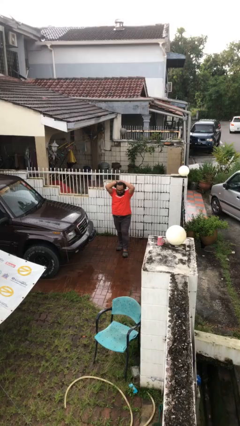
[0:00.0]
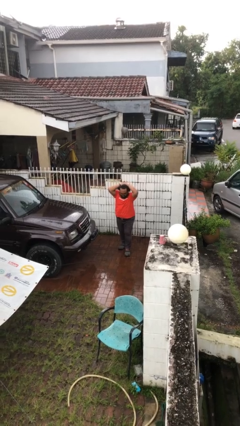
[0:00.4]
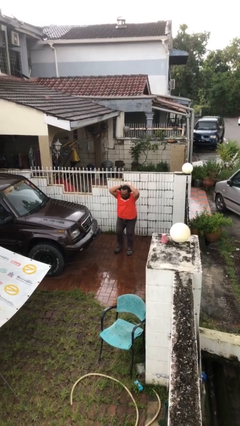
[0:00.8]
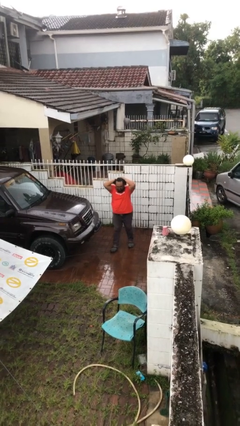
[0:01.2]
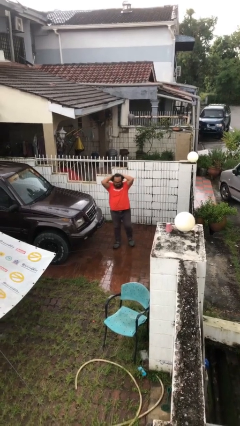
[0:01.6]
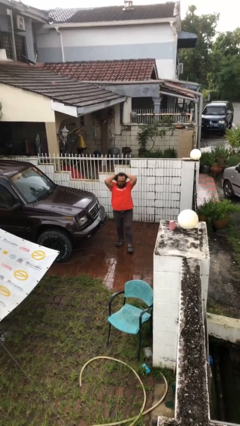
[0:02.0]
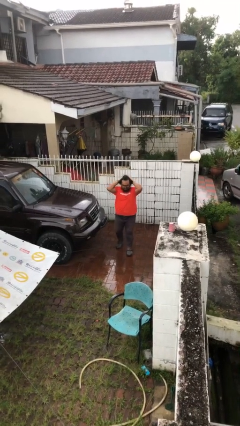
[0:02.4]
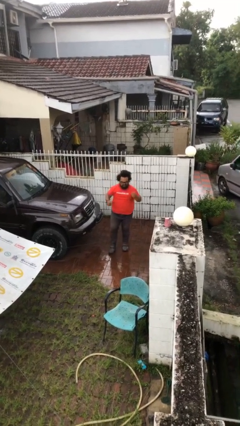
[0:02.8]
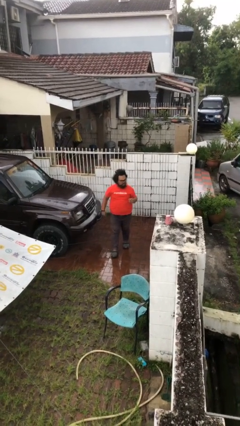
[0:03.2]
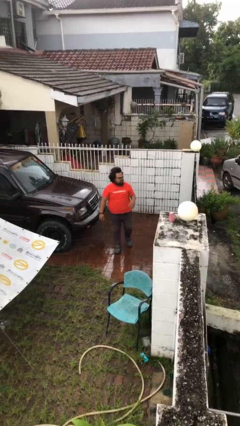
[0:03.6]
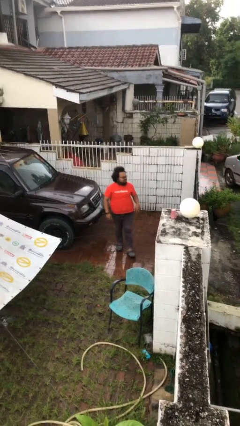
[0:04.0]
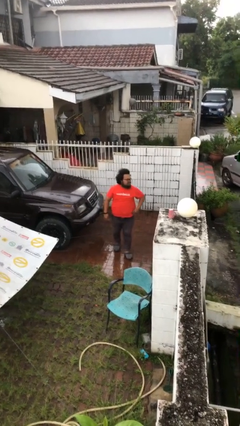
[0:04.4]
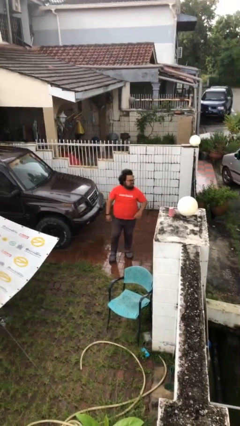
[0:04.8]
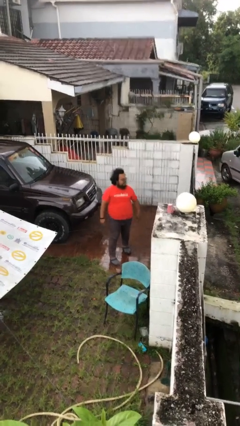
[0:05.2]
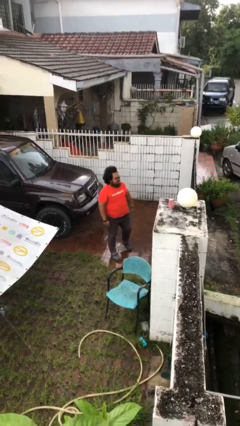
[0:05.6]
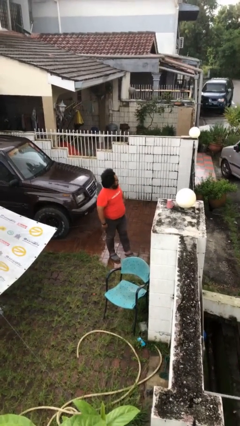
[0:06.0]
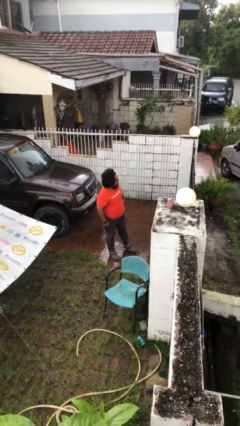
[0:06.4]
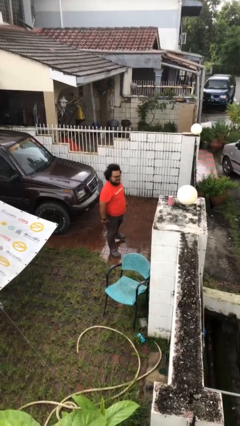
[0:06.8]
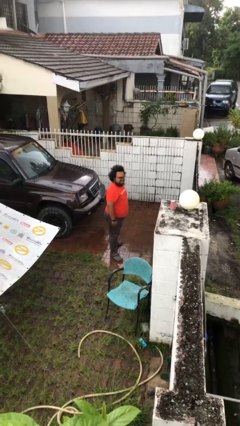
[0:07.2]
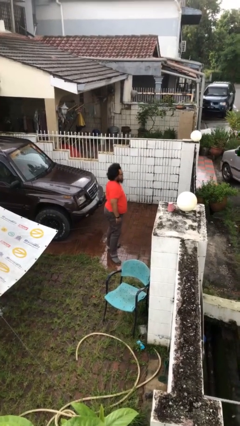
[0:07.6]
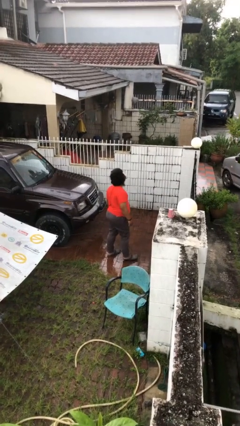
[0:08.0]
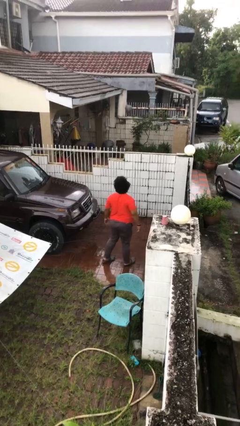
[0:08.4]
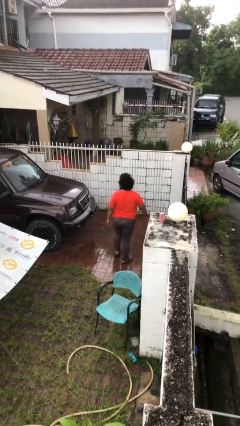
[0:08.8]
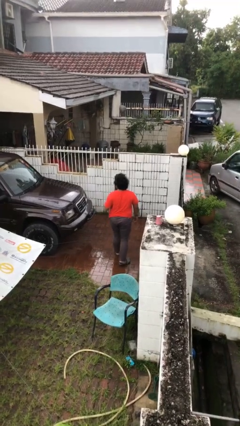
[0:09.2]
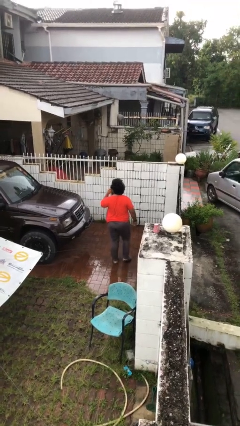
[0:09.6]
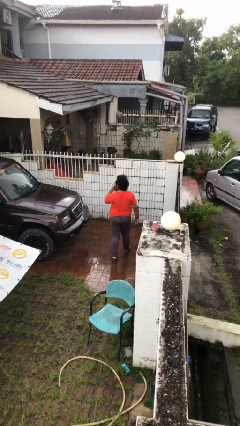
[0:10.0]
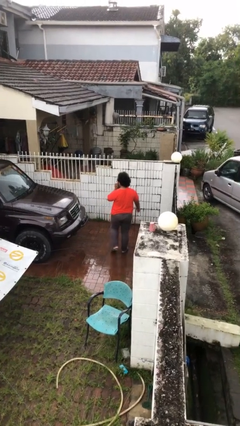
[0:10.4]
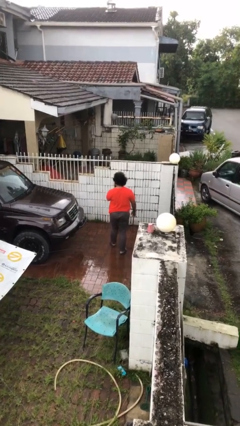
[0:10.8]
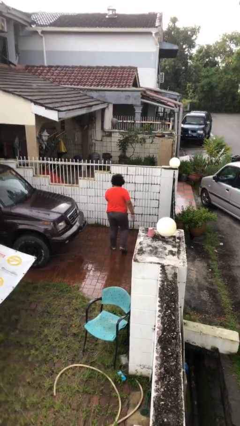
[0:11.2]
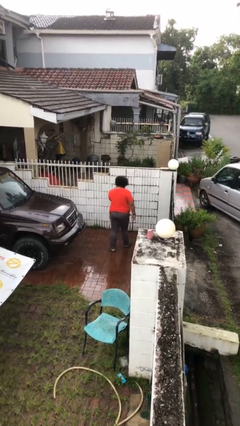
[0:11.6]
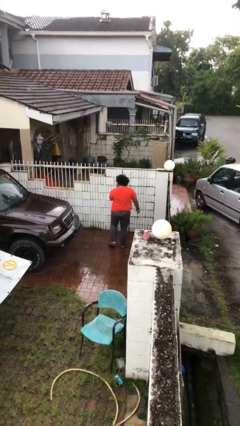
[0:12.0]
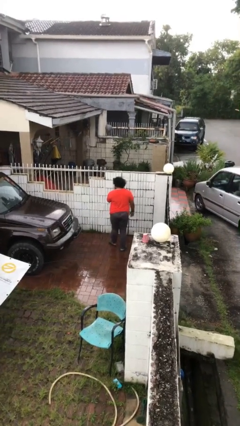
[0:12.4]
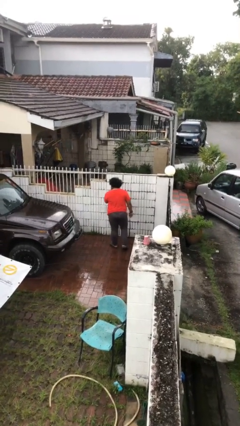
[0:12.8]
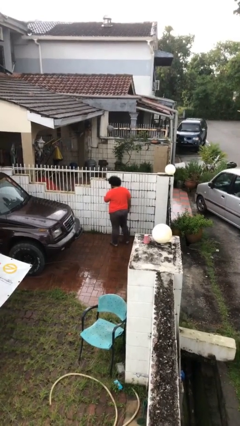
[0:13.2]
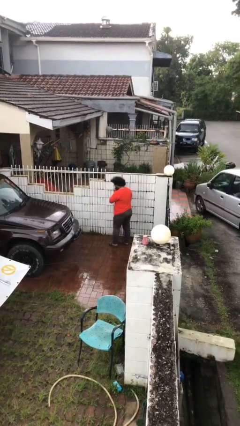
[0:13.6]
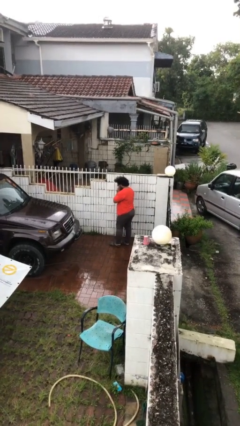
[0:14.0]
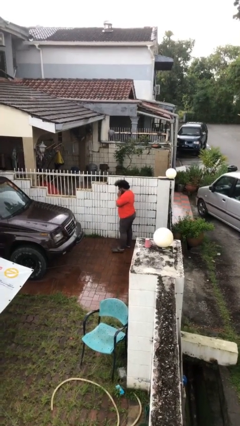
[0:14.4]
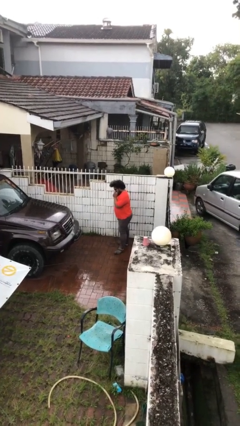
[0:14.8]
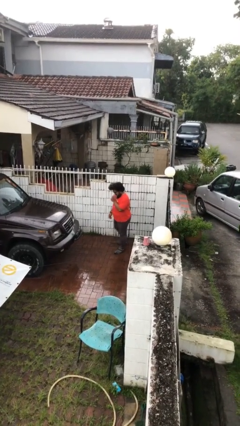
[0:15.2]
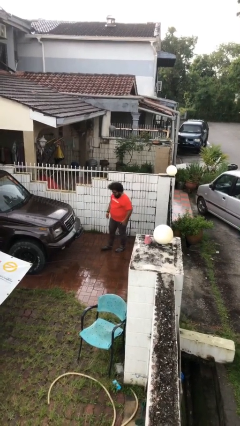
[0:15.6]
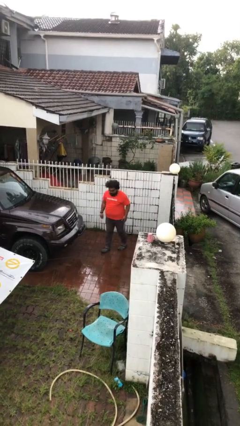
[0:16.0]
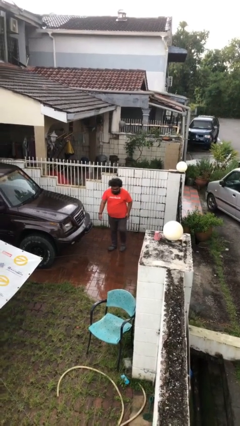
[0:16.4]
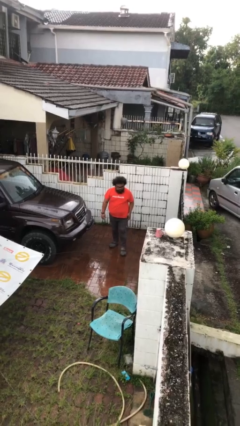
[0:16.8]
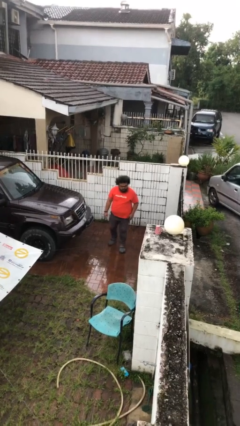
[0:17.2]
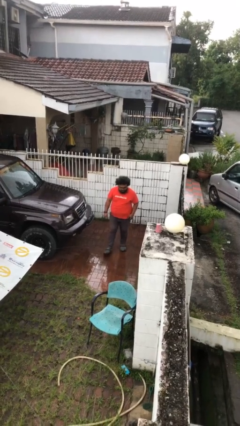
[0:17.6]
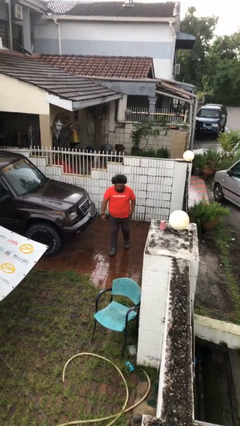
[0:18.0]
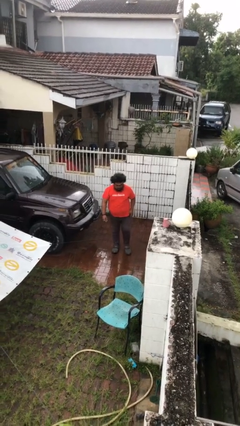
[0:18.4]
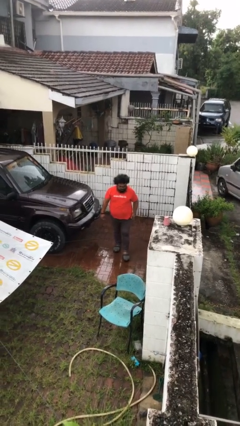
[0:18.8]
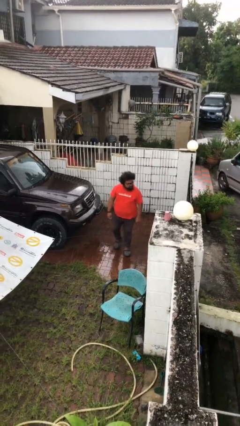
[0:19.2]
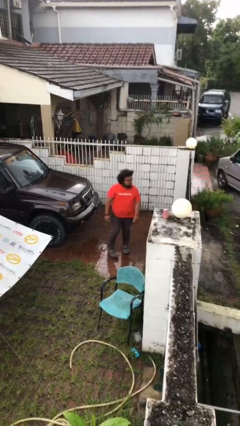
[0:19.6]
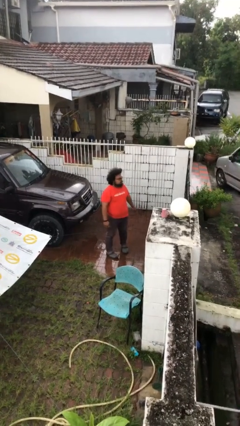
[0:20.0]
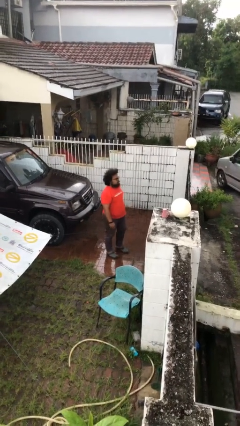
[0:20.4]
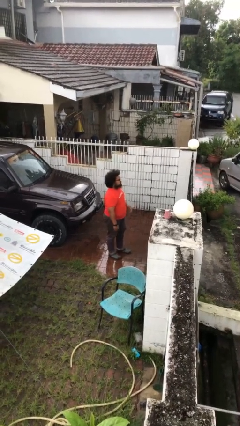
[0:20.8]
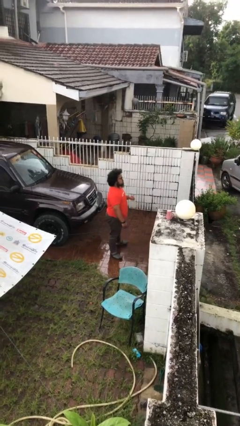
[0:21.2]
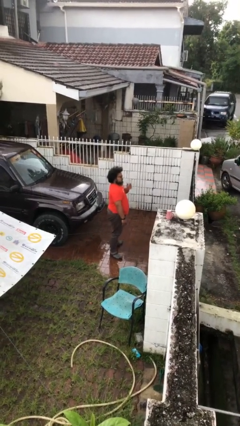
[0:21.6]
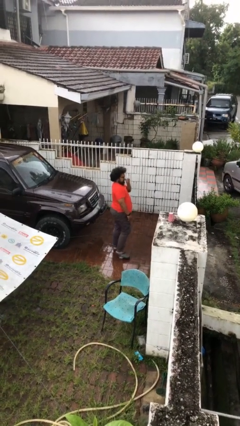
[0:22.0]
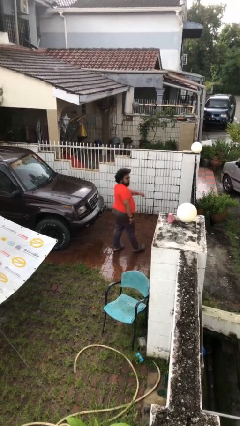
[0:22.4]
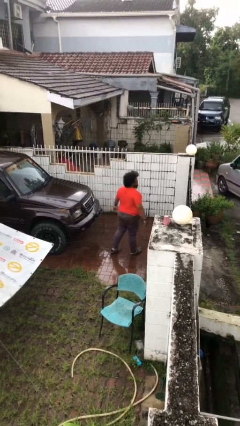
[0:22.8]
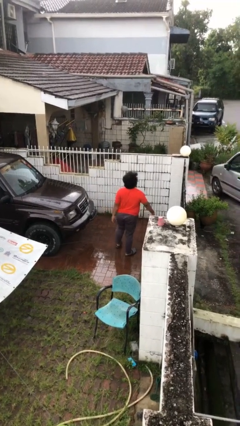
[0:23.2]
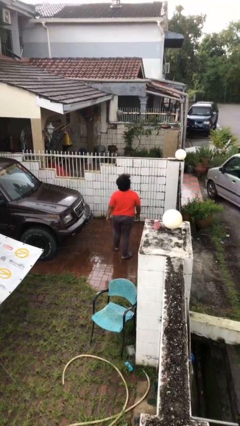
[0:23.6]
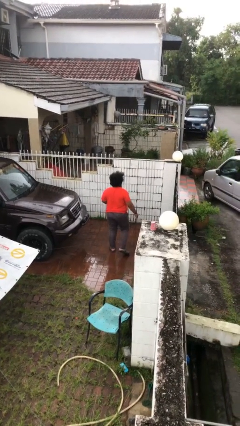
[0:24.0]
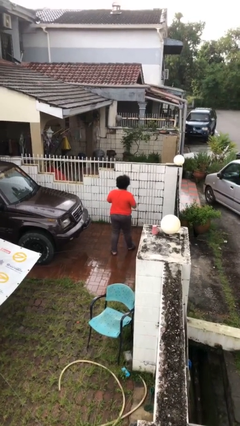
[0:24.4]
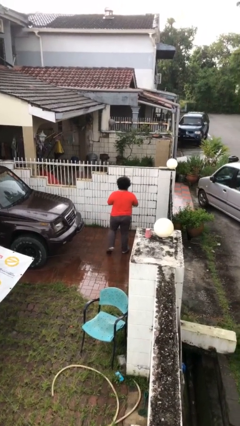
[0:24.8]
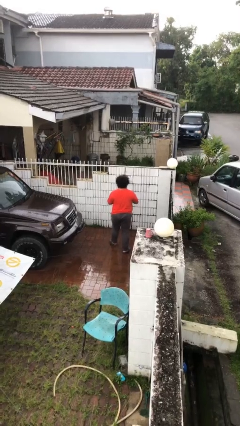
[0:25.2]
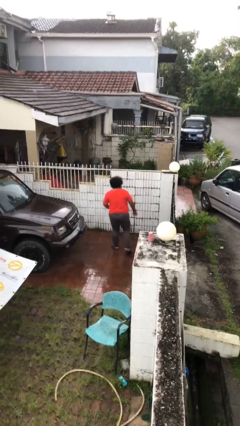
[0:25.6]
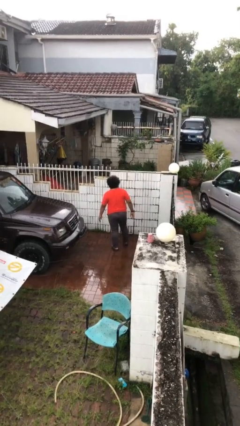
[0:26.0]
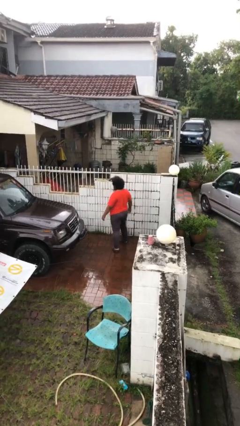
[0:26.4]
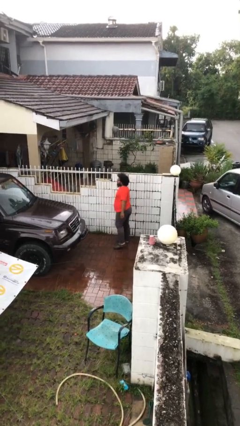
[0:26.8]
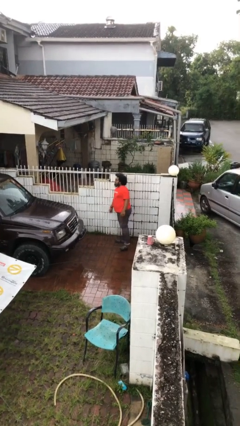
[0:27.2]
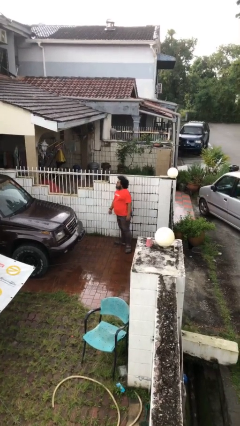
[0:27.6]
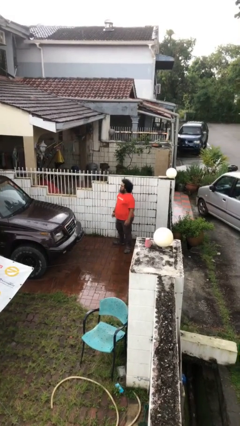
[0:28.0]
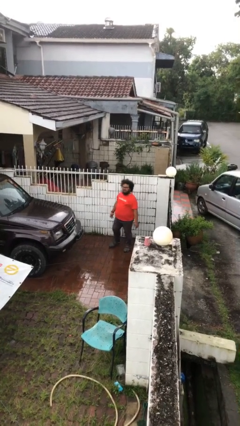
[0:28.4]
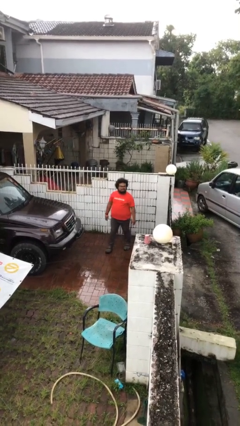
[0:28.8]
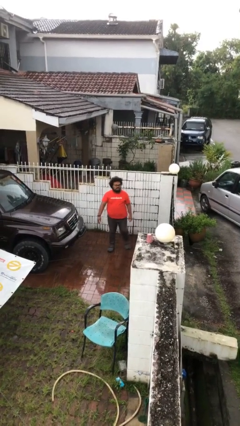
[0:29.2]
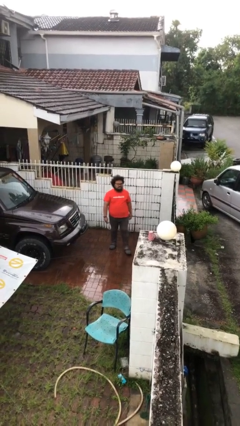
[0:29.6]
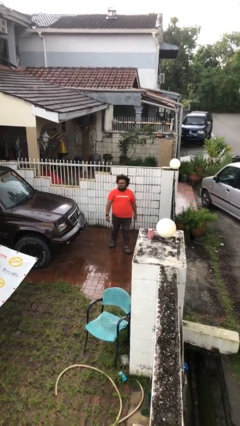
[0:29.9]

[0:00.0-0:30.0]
person walks

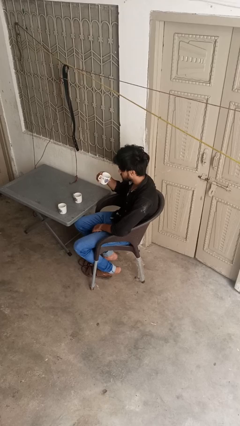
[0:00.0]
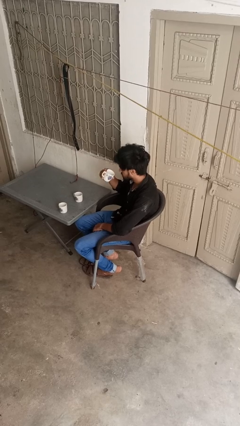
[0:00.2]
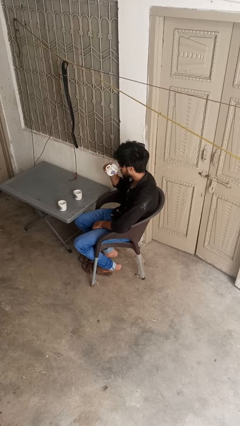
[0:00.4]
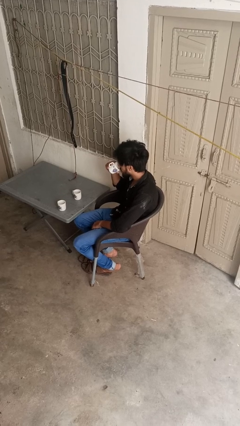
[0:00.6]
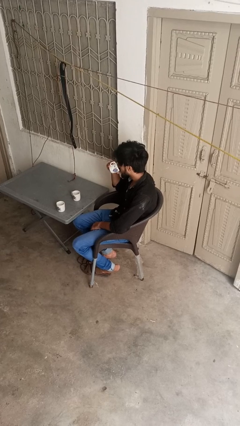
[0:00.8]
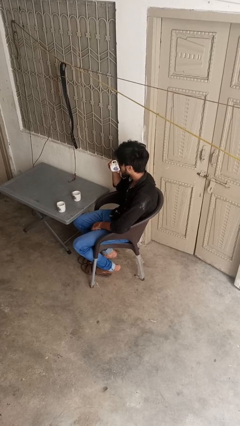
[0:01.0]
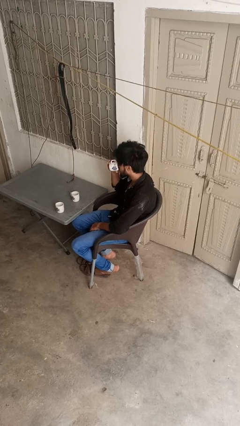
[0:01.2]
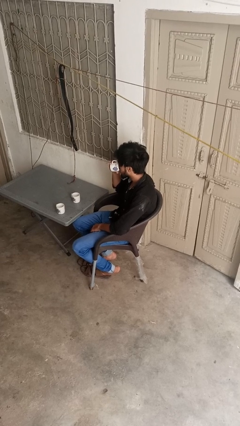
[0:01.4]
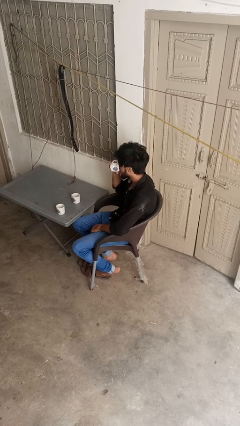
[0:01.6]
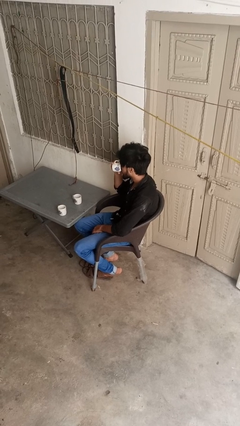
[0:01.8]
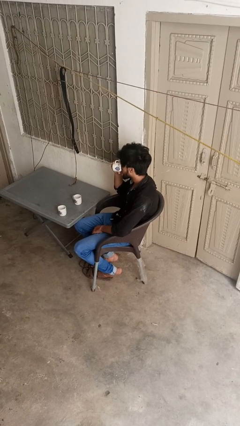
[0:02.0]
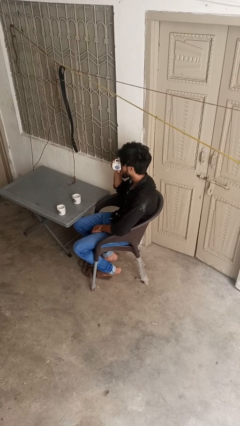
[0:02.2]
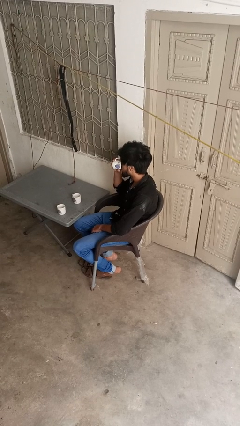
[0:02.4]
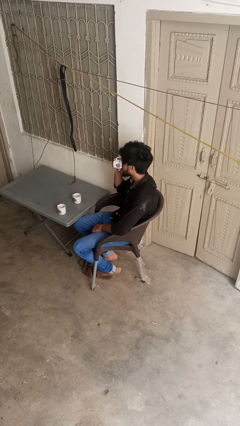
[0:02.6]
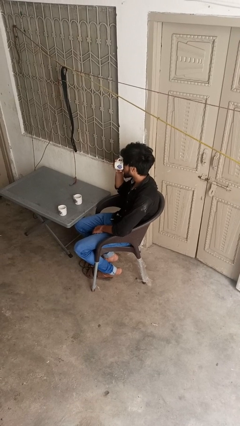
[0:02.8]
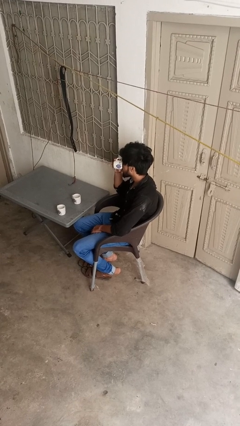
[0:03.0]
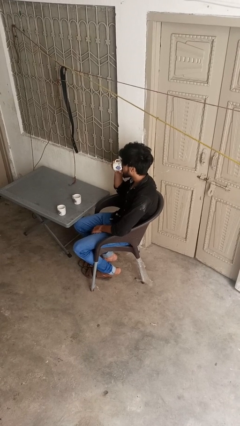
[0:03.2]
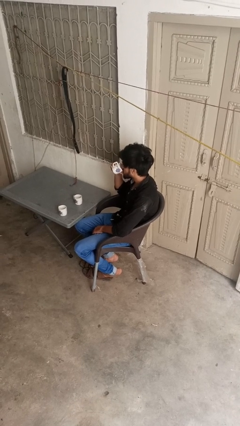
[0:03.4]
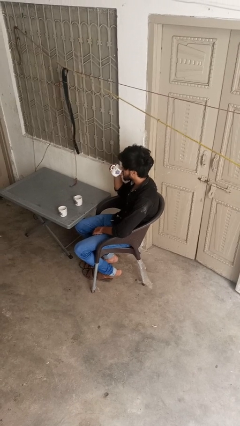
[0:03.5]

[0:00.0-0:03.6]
person drinks from shotglass
